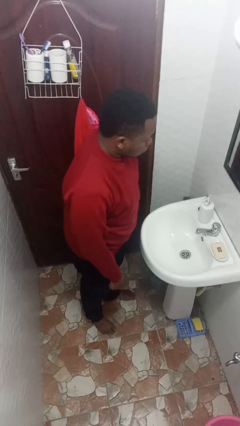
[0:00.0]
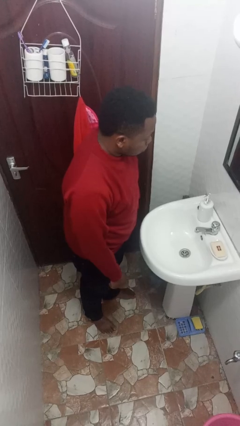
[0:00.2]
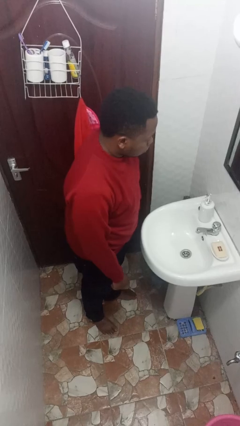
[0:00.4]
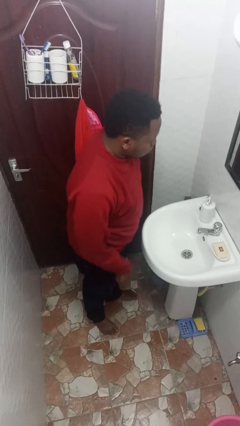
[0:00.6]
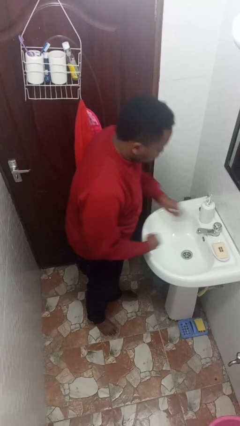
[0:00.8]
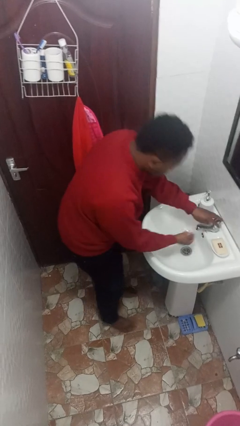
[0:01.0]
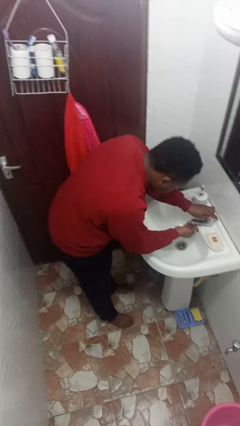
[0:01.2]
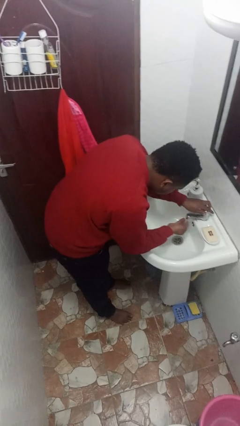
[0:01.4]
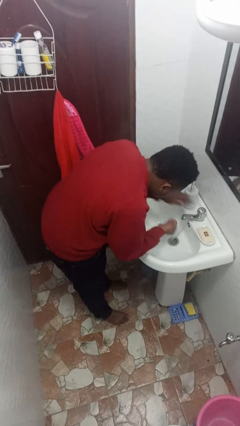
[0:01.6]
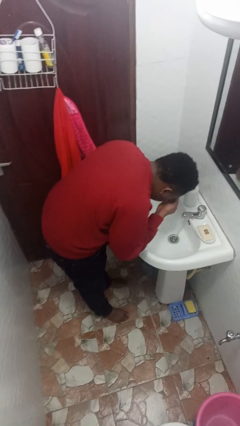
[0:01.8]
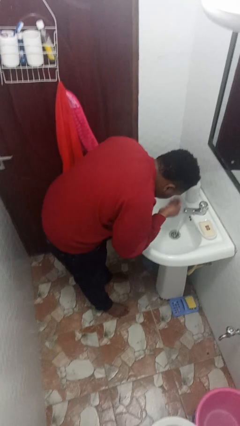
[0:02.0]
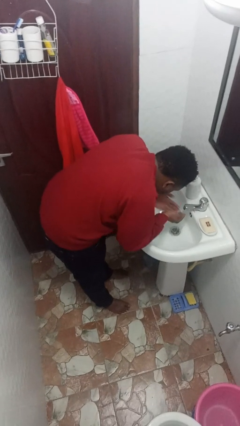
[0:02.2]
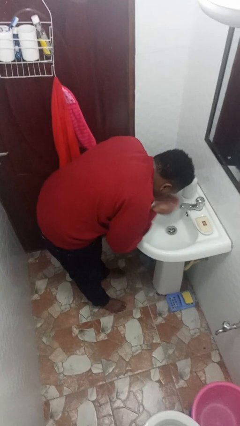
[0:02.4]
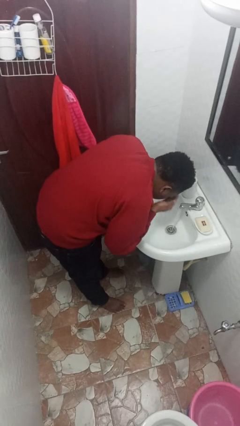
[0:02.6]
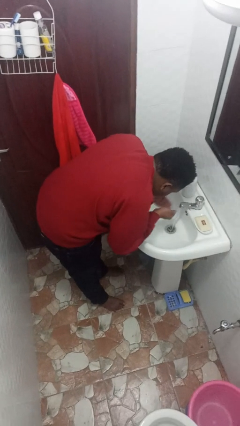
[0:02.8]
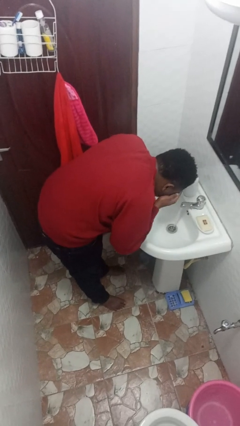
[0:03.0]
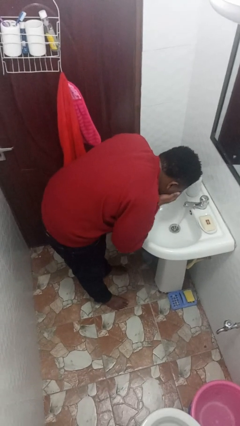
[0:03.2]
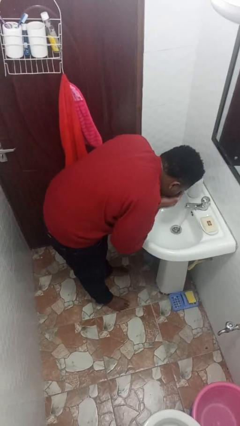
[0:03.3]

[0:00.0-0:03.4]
person washes face

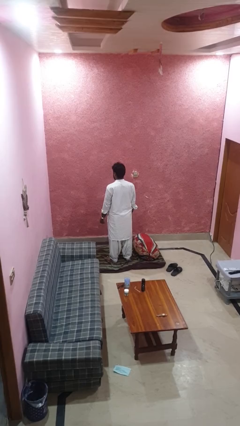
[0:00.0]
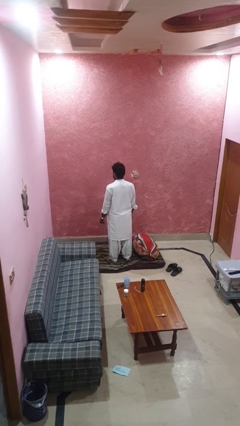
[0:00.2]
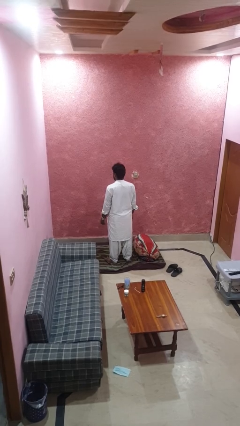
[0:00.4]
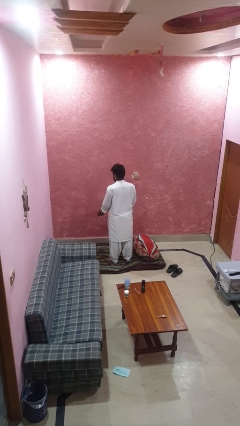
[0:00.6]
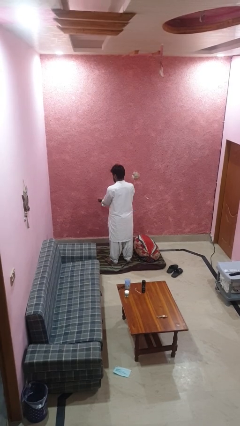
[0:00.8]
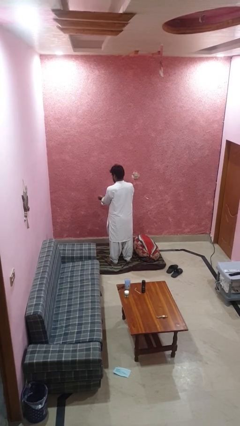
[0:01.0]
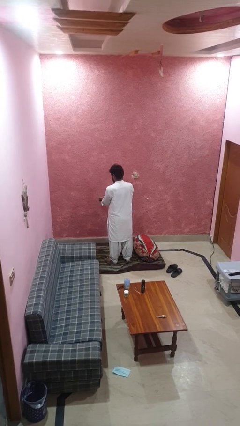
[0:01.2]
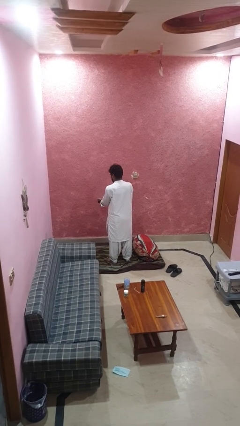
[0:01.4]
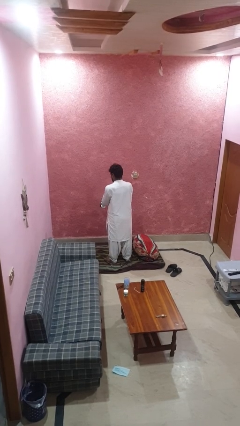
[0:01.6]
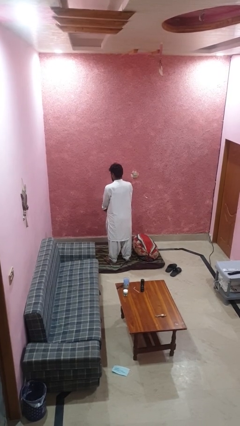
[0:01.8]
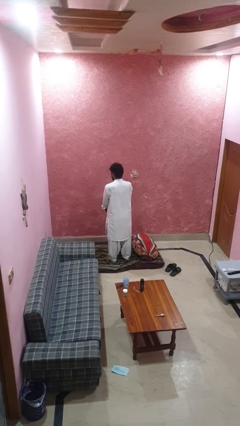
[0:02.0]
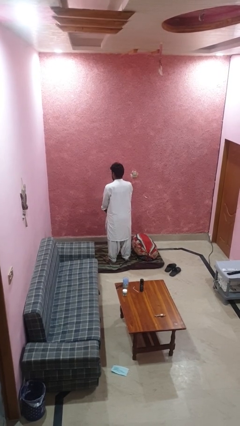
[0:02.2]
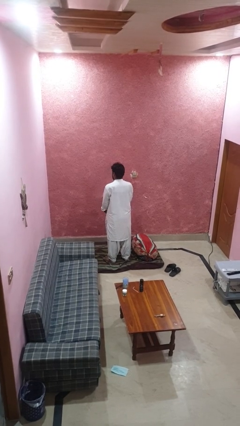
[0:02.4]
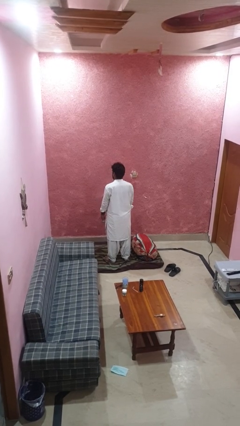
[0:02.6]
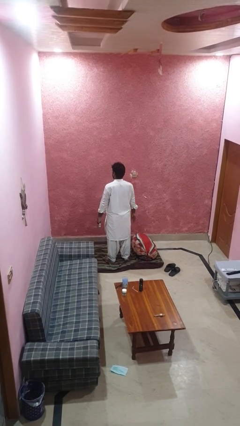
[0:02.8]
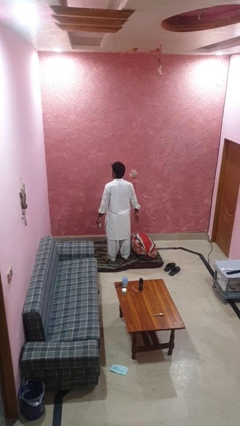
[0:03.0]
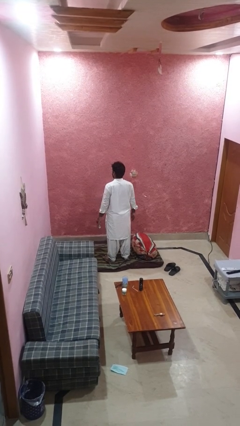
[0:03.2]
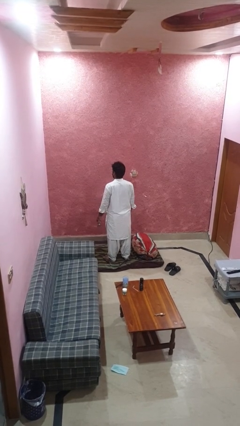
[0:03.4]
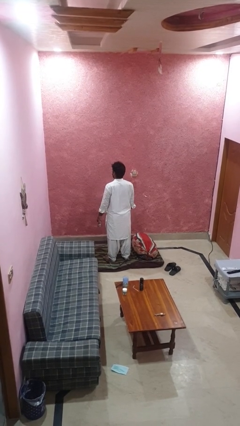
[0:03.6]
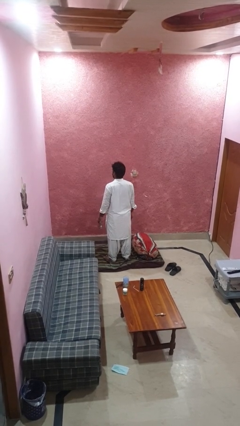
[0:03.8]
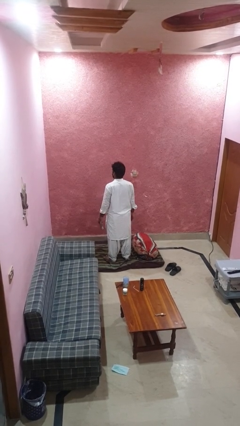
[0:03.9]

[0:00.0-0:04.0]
person takes off wristwatch

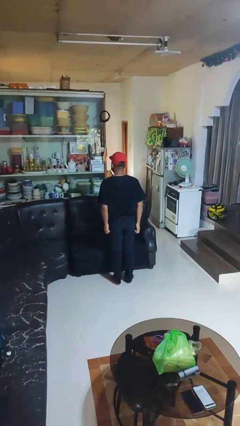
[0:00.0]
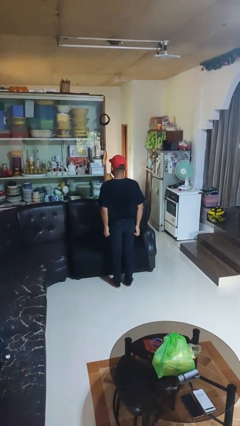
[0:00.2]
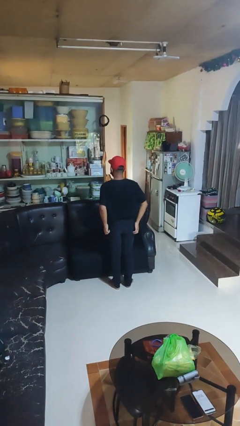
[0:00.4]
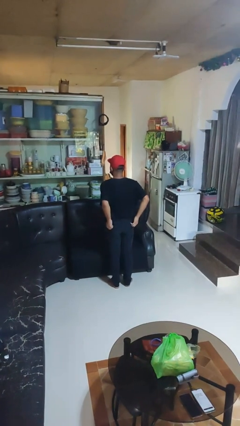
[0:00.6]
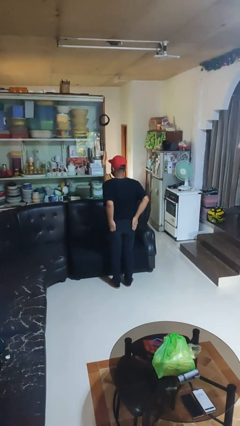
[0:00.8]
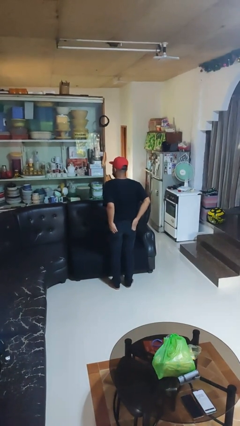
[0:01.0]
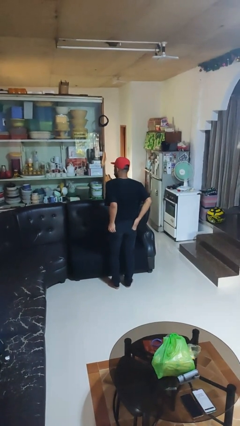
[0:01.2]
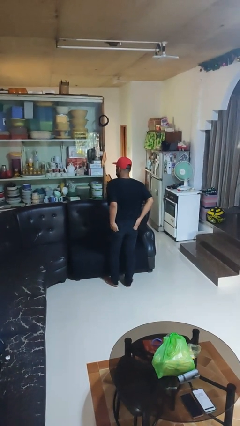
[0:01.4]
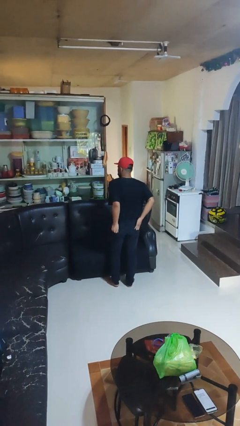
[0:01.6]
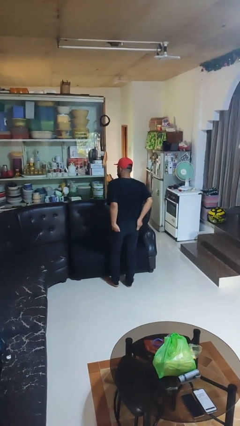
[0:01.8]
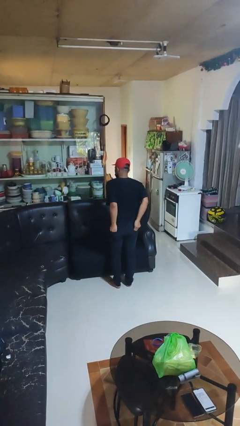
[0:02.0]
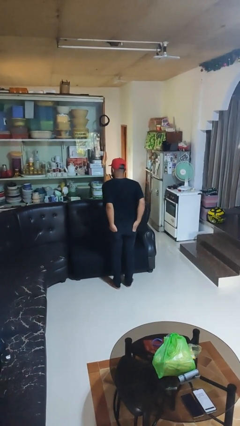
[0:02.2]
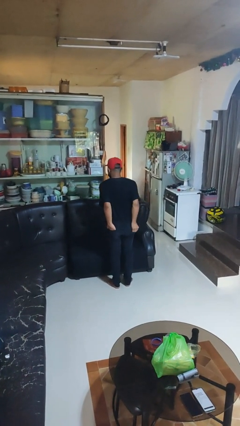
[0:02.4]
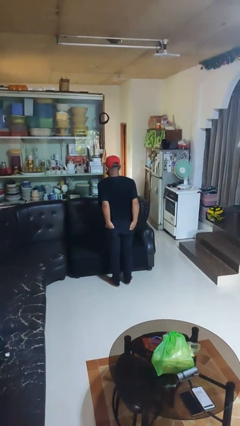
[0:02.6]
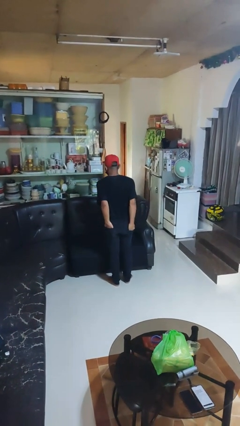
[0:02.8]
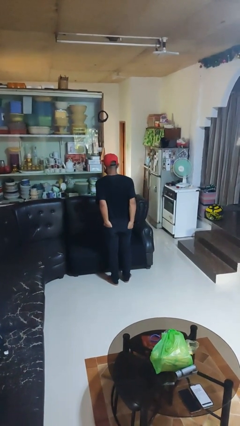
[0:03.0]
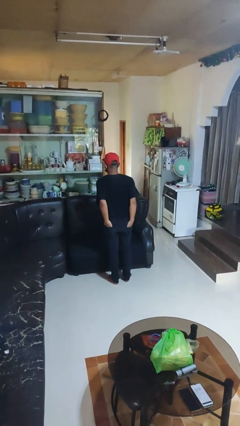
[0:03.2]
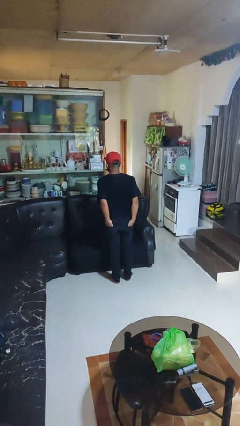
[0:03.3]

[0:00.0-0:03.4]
person puts hands in back pockets

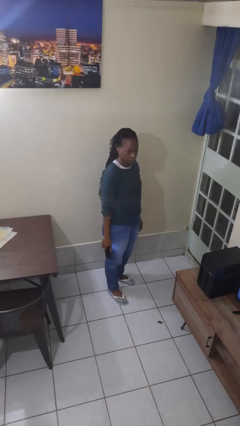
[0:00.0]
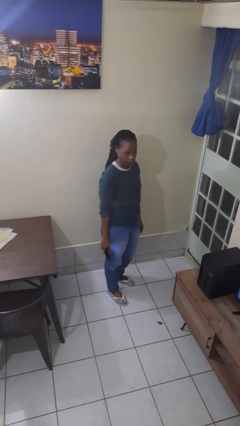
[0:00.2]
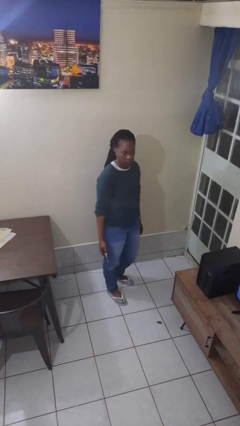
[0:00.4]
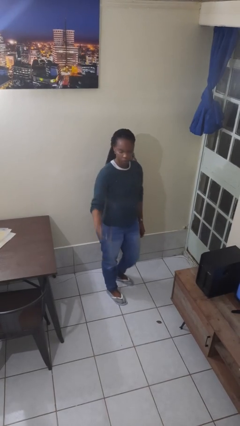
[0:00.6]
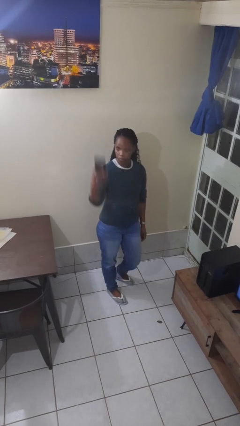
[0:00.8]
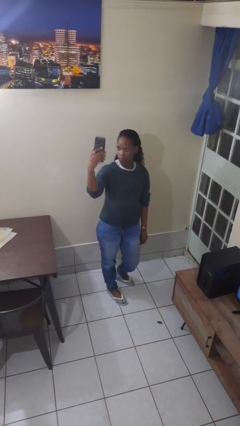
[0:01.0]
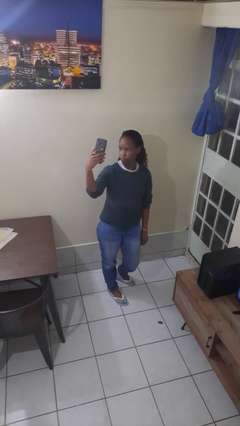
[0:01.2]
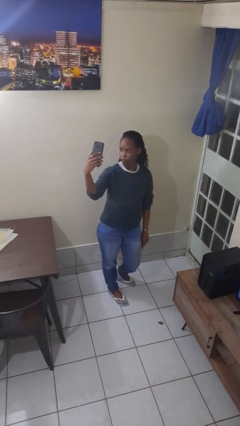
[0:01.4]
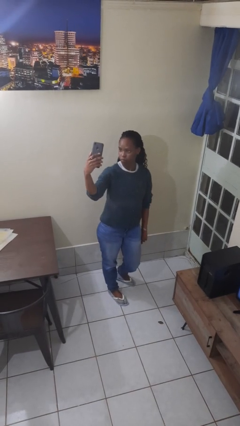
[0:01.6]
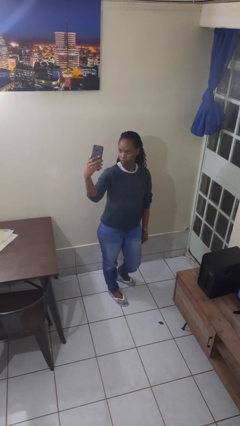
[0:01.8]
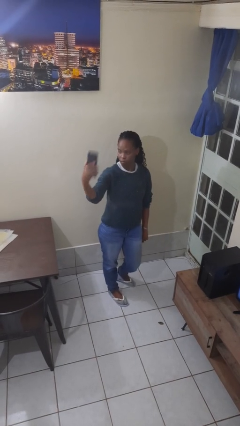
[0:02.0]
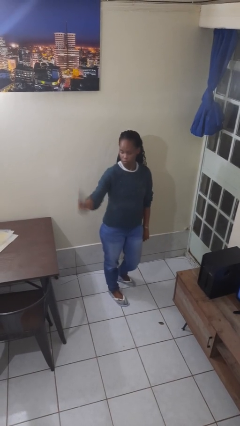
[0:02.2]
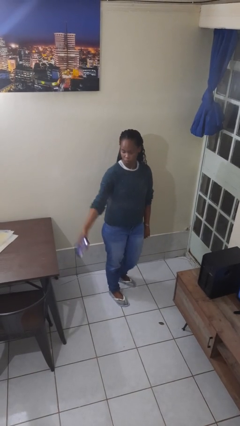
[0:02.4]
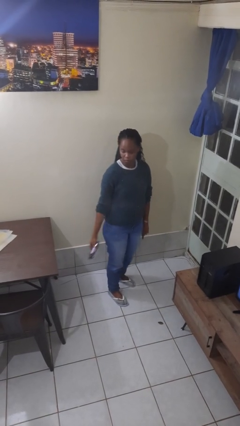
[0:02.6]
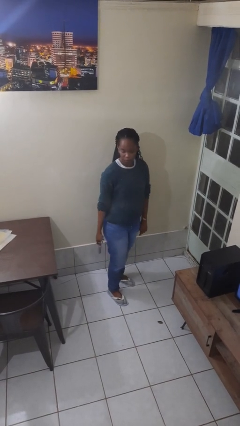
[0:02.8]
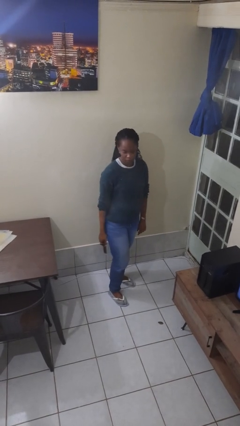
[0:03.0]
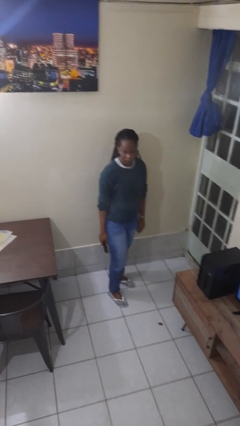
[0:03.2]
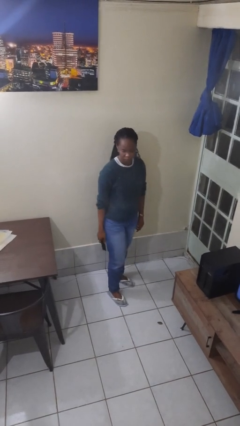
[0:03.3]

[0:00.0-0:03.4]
person takes selfie

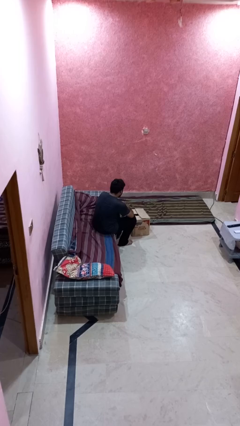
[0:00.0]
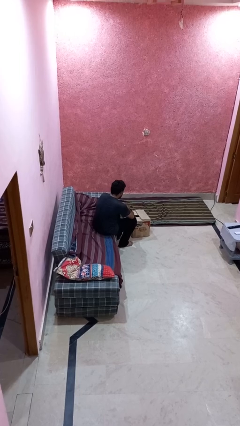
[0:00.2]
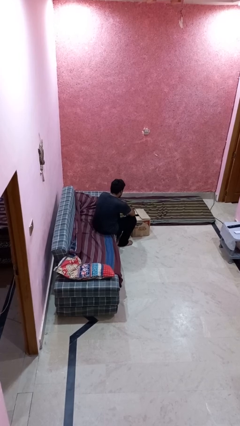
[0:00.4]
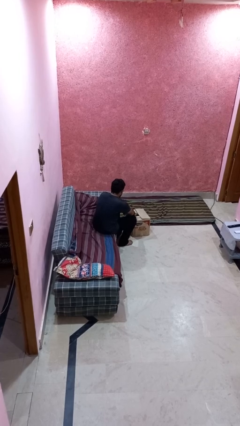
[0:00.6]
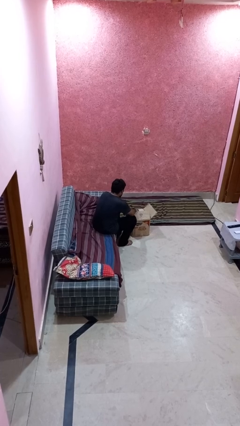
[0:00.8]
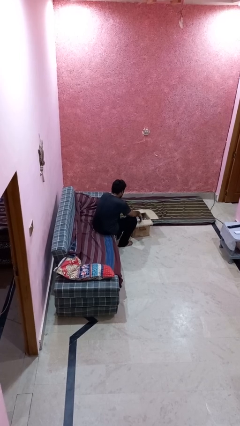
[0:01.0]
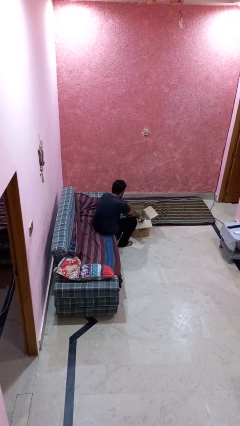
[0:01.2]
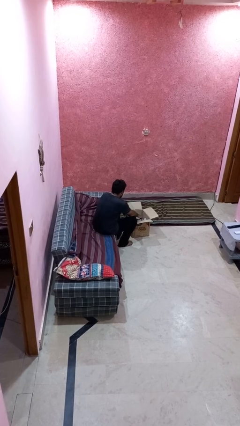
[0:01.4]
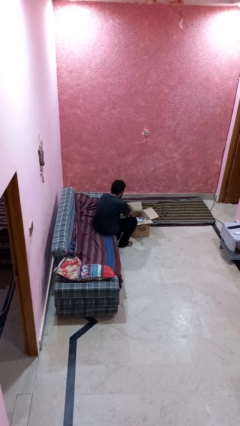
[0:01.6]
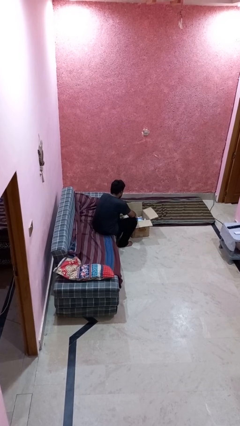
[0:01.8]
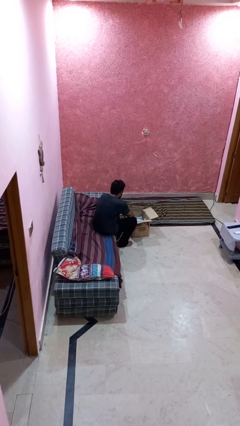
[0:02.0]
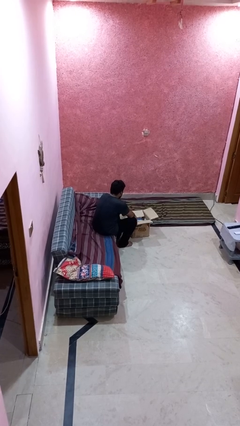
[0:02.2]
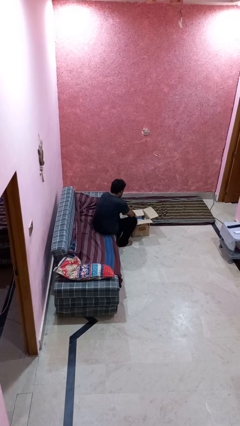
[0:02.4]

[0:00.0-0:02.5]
person opens box

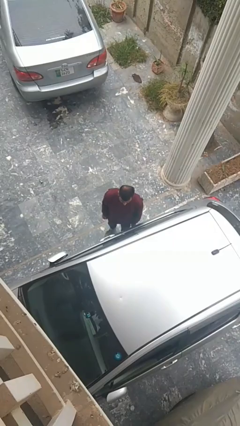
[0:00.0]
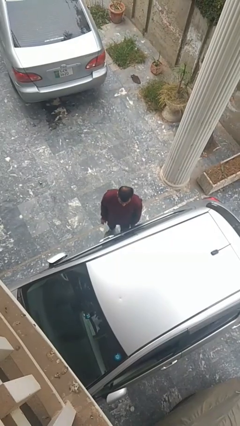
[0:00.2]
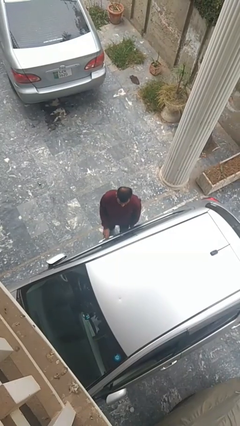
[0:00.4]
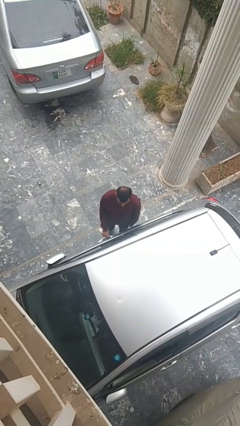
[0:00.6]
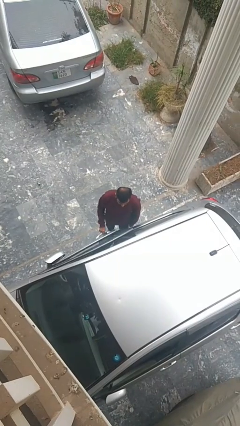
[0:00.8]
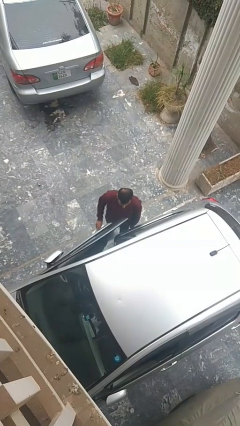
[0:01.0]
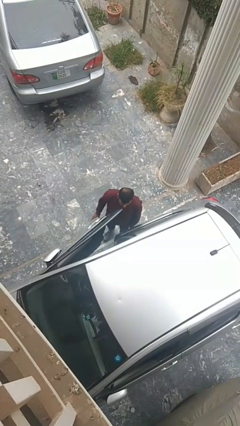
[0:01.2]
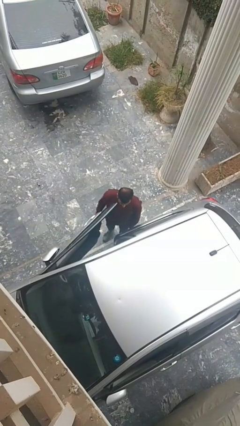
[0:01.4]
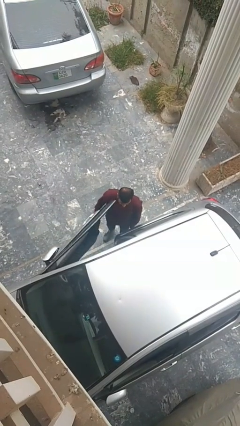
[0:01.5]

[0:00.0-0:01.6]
person opens car door
